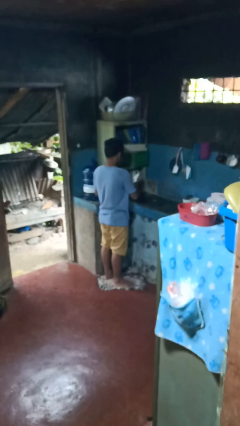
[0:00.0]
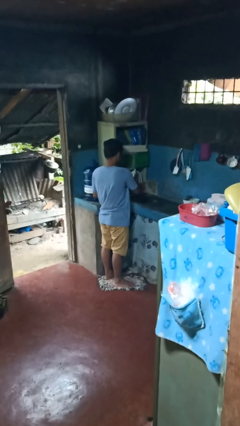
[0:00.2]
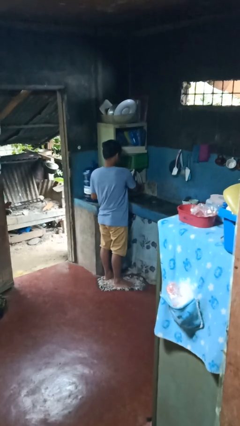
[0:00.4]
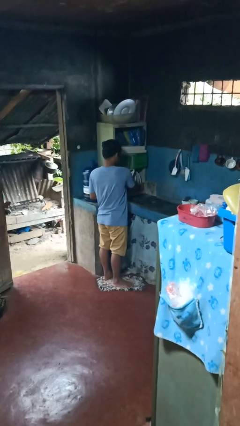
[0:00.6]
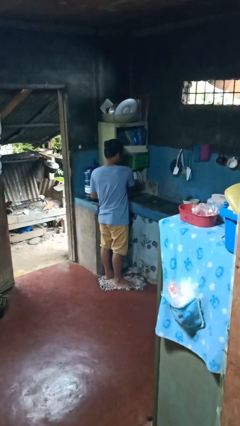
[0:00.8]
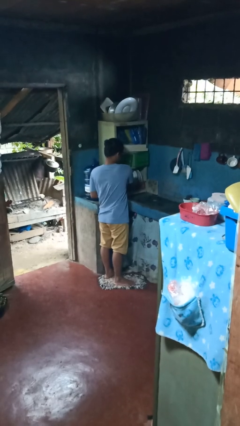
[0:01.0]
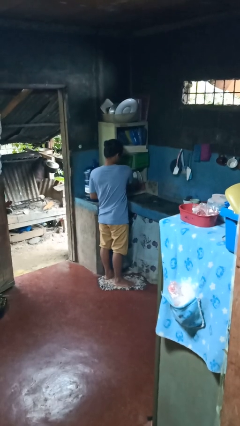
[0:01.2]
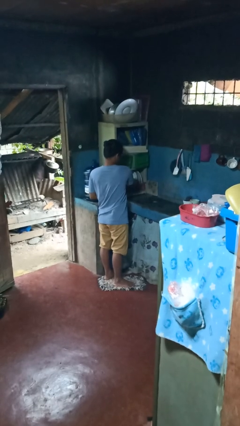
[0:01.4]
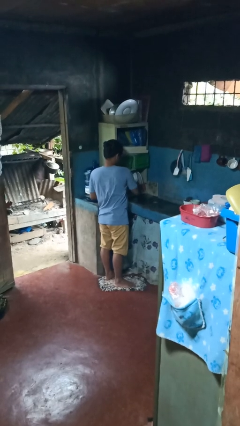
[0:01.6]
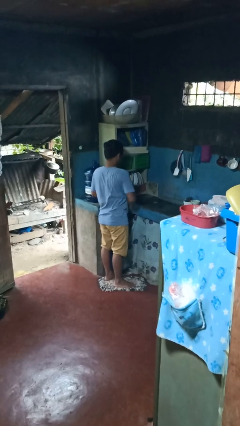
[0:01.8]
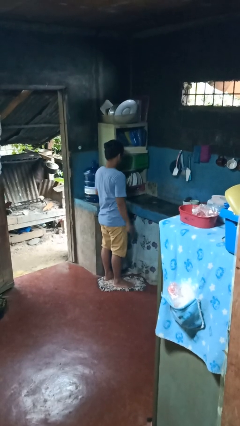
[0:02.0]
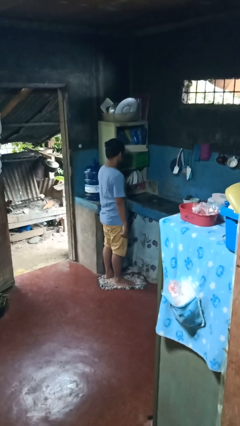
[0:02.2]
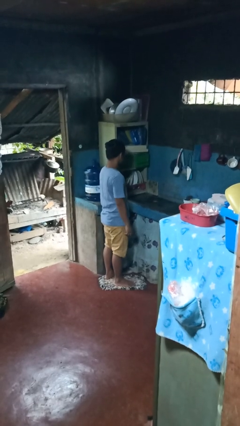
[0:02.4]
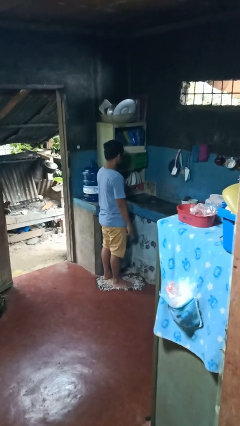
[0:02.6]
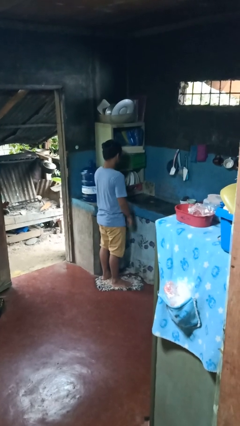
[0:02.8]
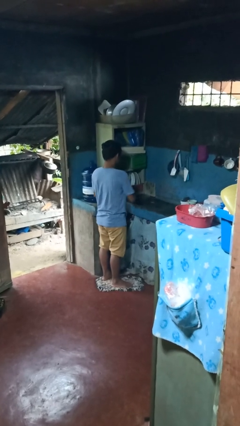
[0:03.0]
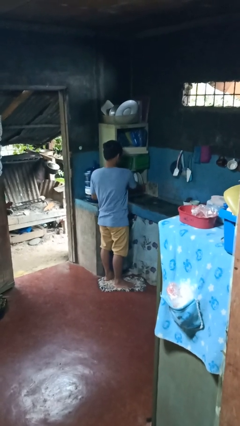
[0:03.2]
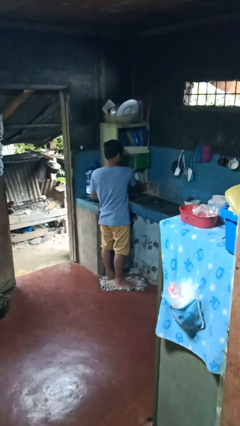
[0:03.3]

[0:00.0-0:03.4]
person loads dishwasher

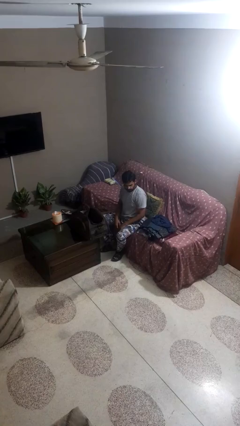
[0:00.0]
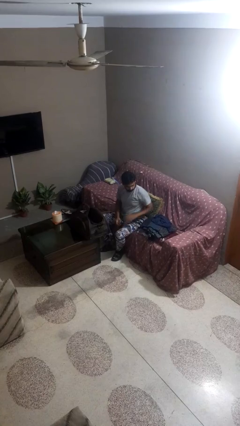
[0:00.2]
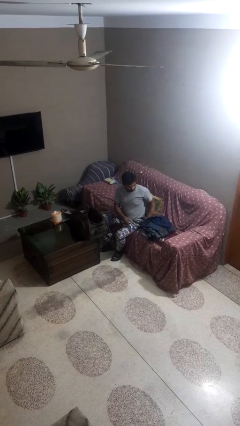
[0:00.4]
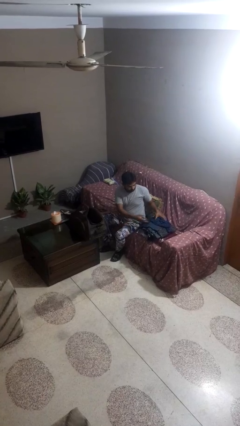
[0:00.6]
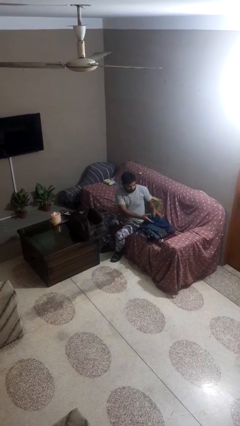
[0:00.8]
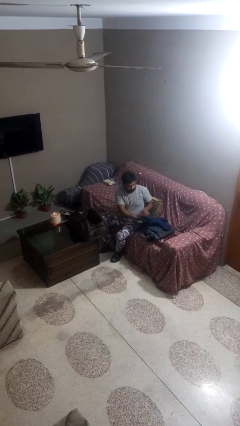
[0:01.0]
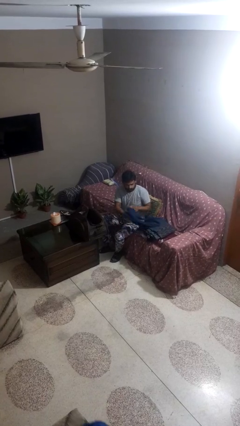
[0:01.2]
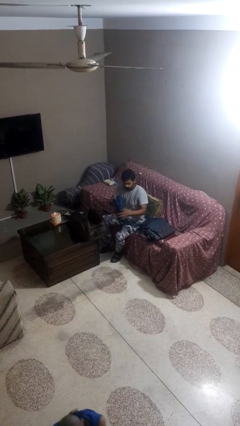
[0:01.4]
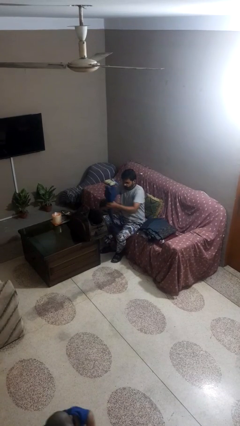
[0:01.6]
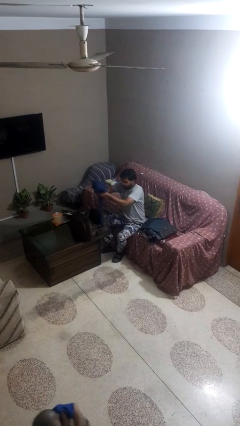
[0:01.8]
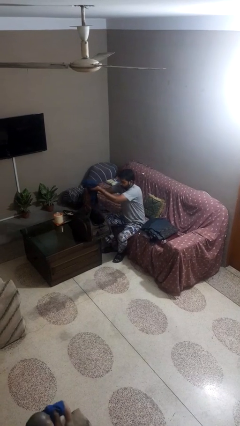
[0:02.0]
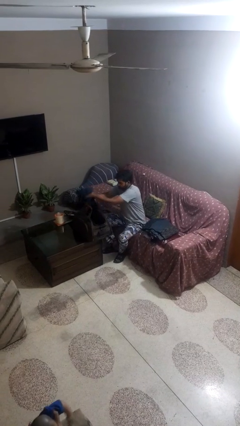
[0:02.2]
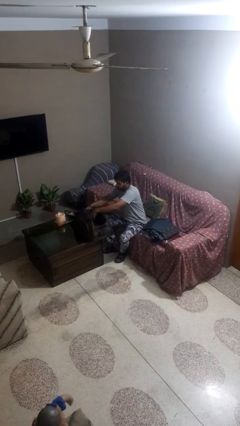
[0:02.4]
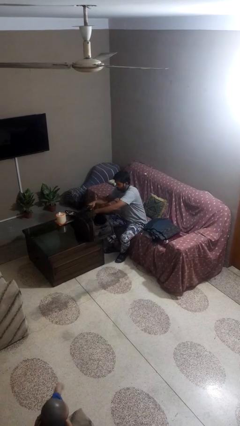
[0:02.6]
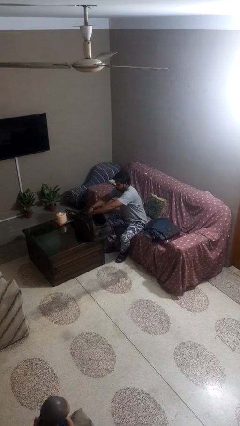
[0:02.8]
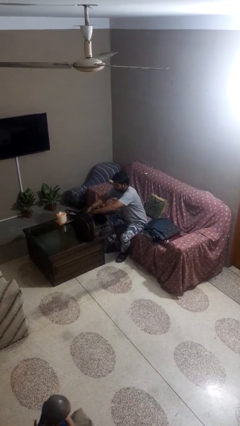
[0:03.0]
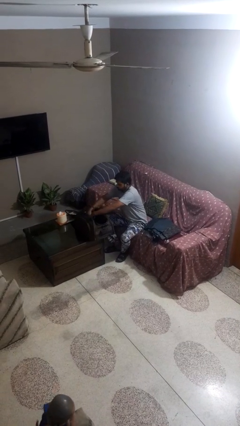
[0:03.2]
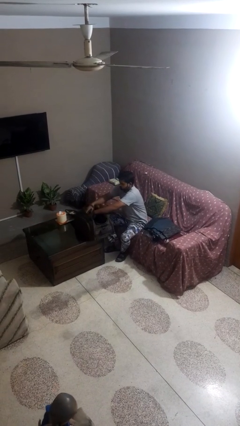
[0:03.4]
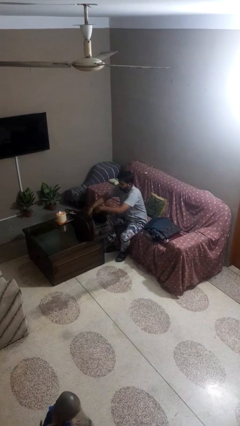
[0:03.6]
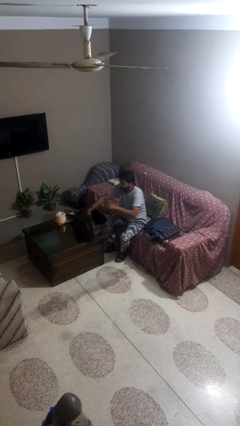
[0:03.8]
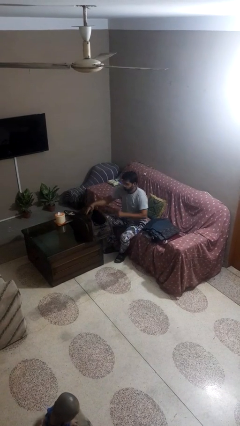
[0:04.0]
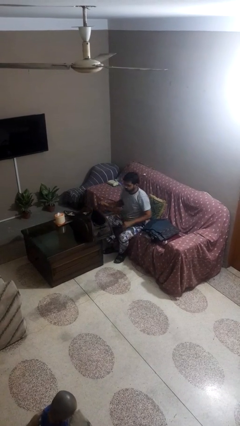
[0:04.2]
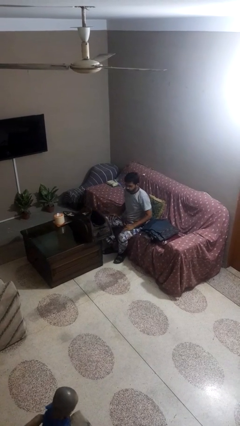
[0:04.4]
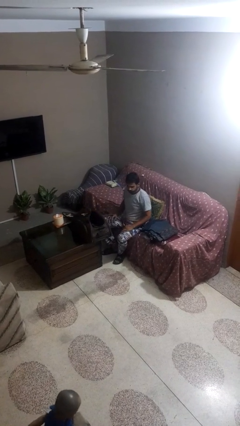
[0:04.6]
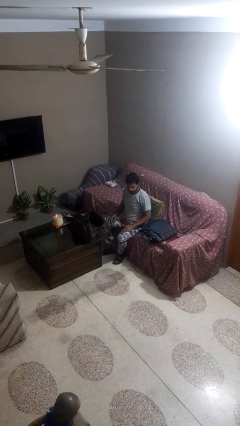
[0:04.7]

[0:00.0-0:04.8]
person loads clothes into suitcase

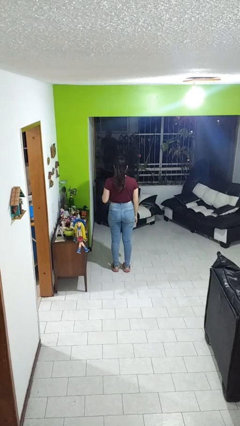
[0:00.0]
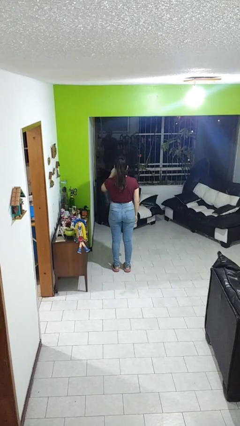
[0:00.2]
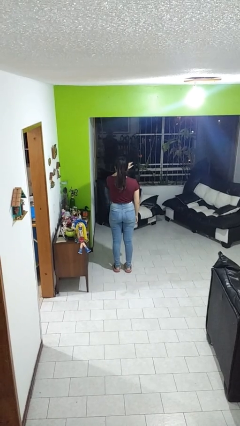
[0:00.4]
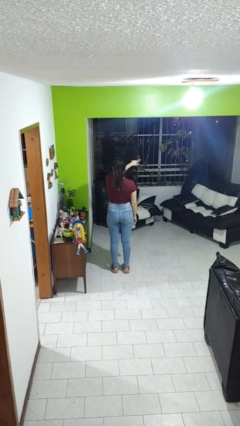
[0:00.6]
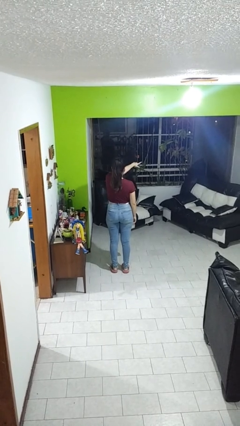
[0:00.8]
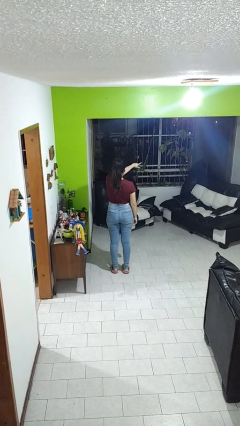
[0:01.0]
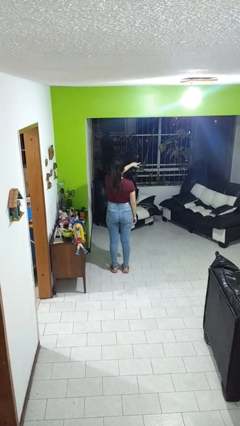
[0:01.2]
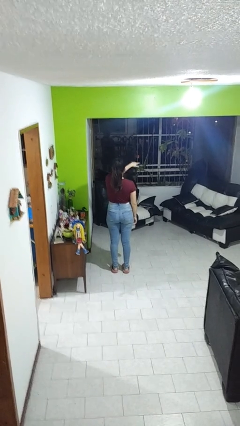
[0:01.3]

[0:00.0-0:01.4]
person points at person

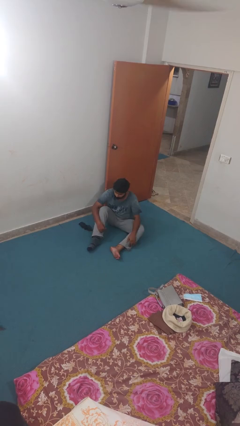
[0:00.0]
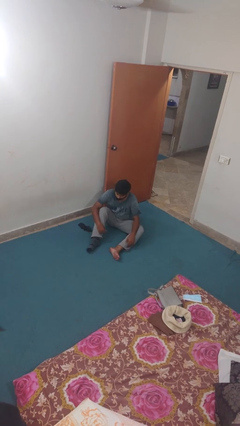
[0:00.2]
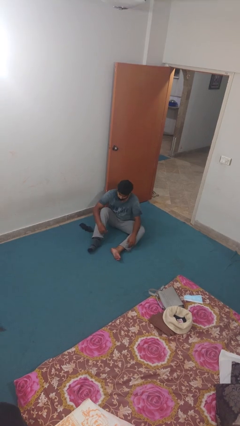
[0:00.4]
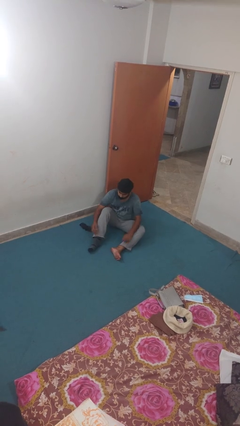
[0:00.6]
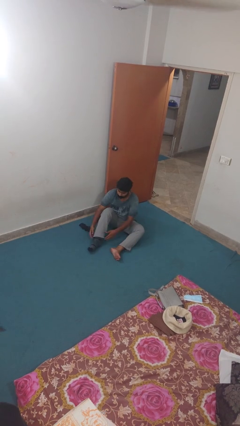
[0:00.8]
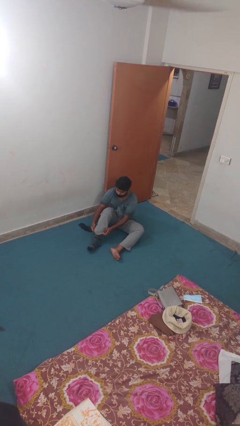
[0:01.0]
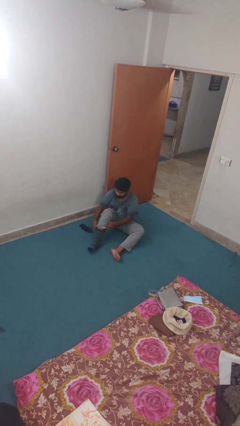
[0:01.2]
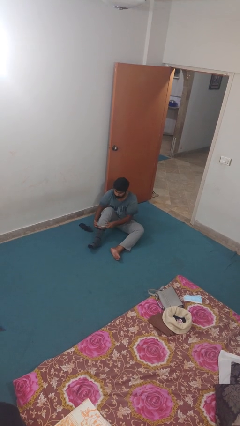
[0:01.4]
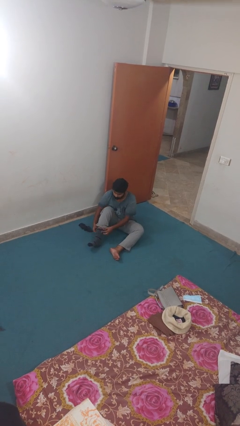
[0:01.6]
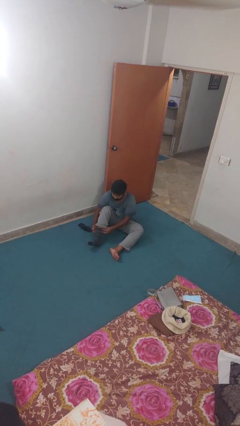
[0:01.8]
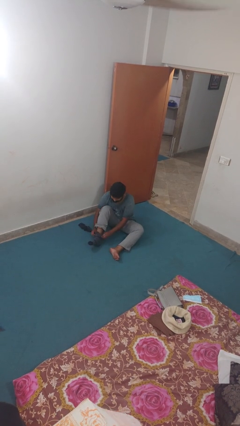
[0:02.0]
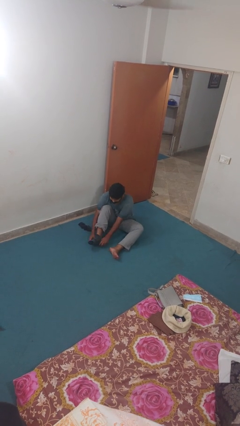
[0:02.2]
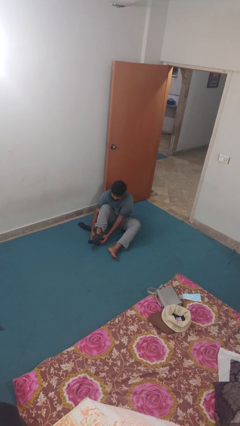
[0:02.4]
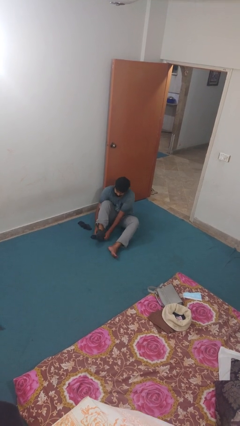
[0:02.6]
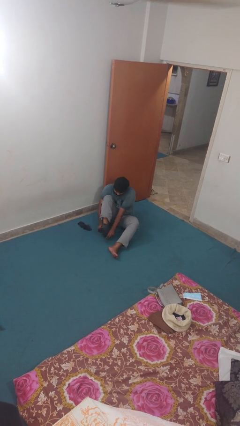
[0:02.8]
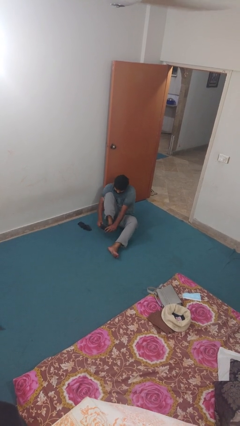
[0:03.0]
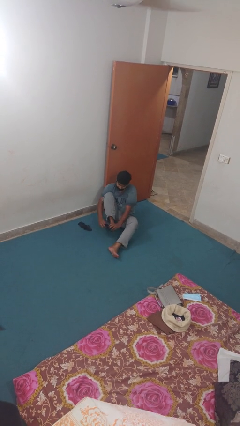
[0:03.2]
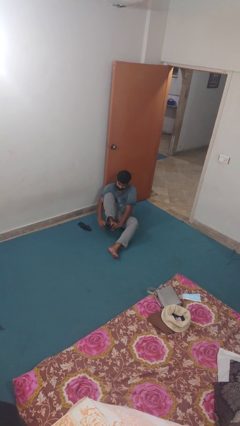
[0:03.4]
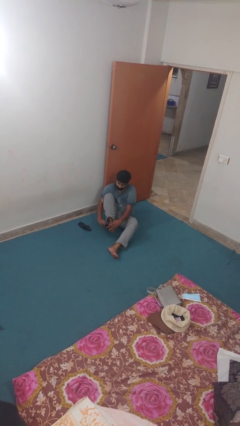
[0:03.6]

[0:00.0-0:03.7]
person takes off socks

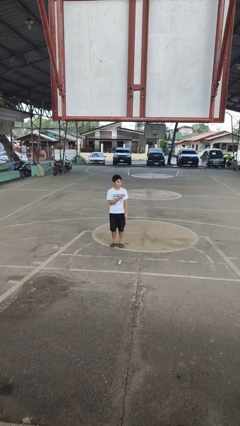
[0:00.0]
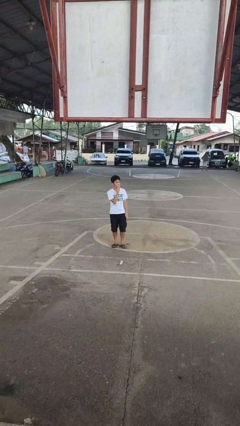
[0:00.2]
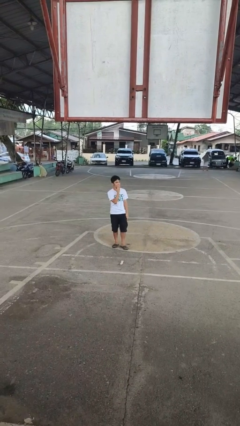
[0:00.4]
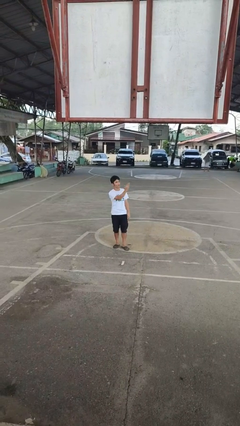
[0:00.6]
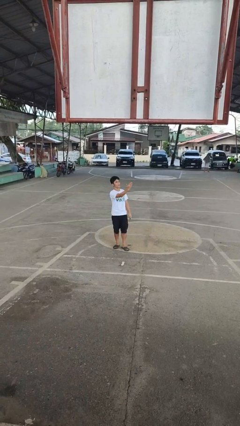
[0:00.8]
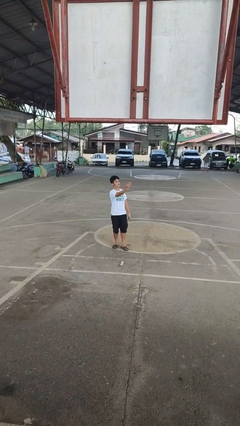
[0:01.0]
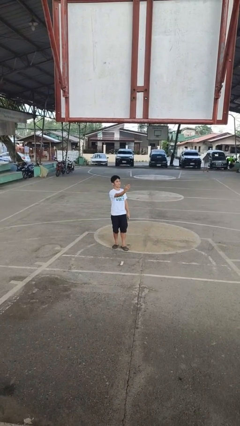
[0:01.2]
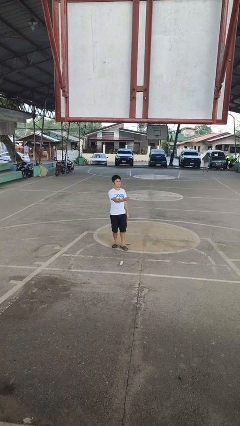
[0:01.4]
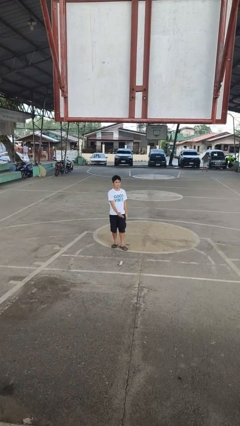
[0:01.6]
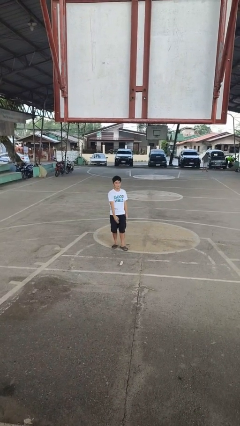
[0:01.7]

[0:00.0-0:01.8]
person gestures blow kiss

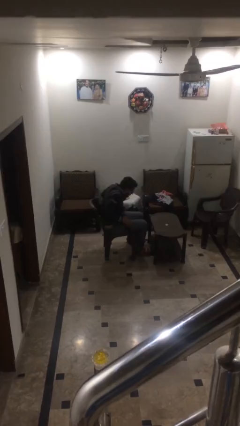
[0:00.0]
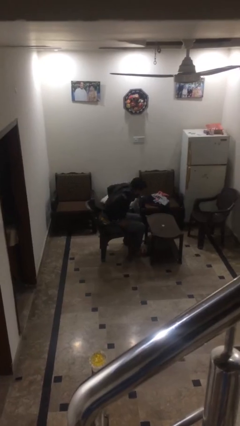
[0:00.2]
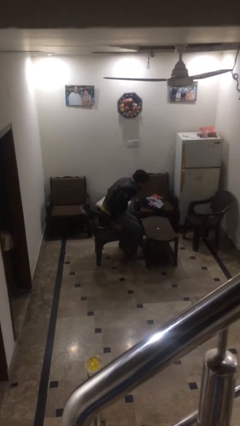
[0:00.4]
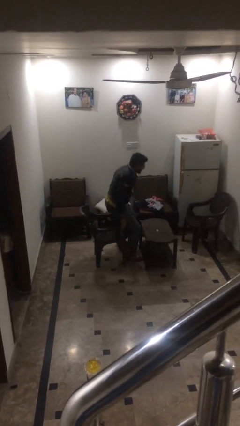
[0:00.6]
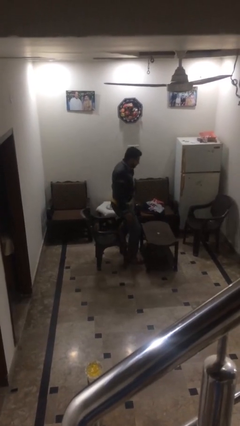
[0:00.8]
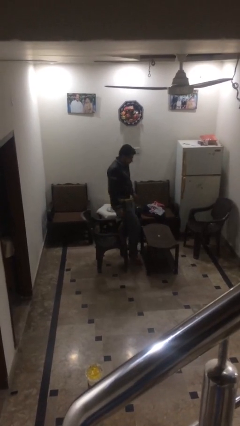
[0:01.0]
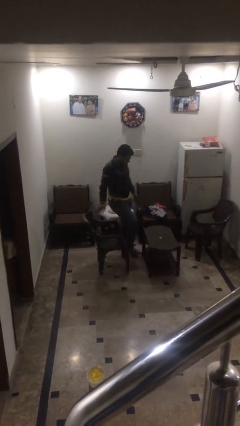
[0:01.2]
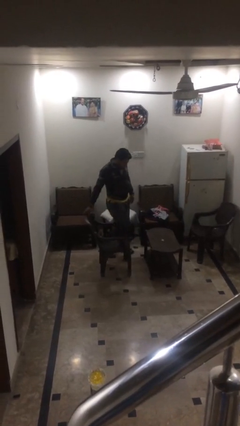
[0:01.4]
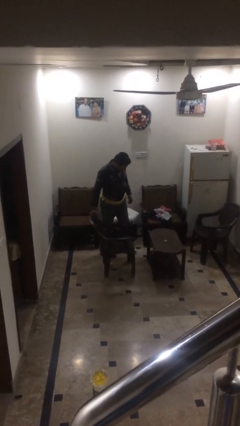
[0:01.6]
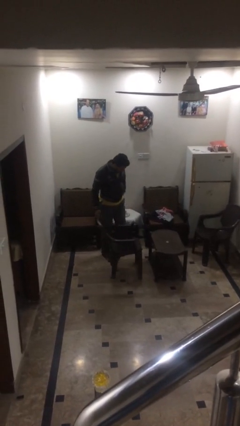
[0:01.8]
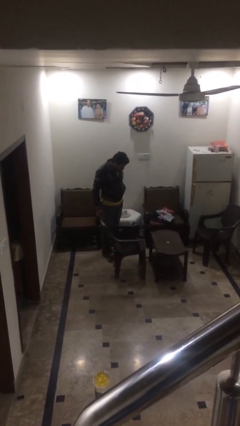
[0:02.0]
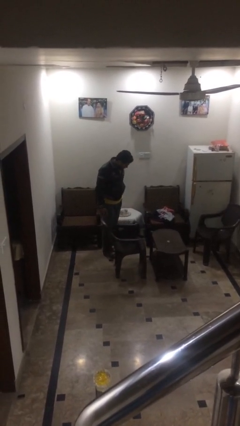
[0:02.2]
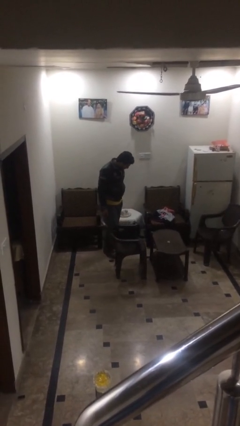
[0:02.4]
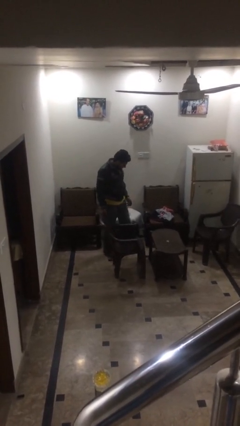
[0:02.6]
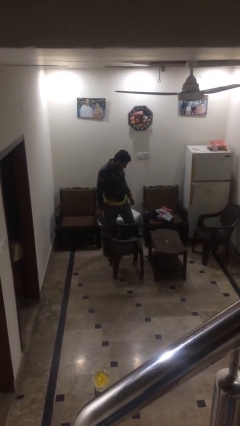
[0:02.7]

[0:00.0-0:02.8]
person stands up
